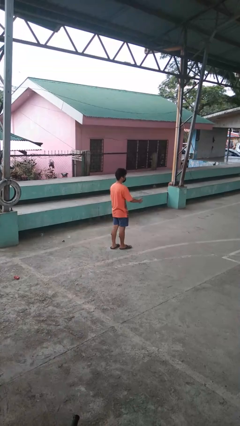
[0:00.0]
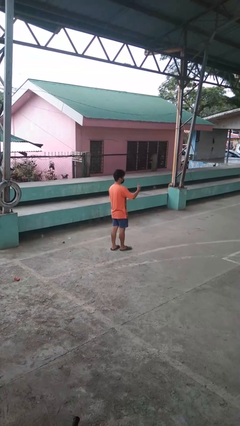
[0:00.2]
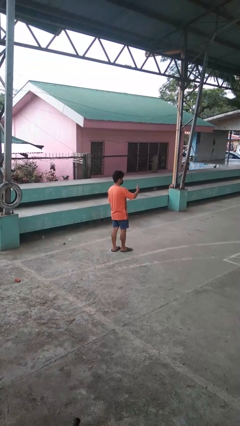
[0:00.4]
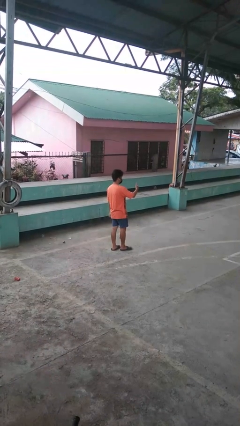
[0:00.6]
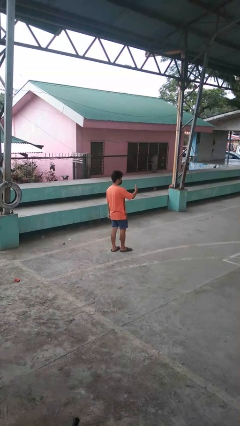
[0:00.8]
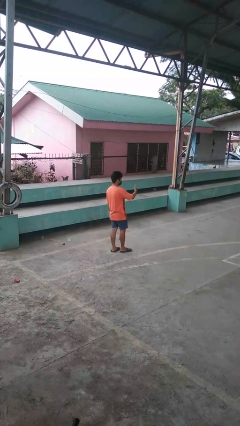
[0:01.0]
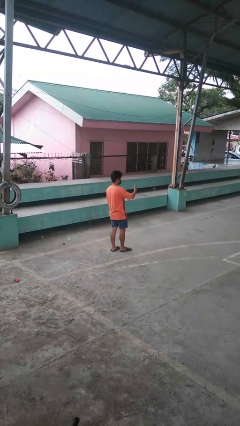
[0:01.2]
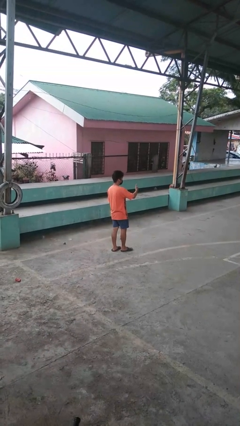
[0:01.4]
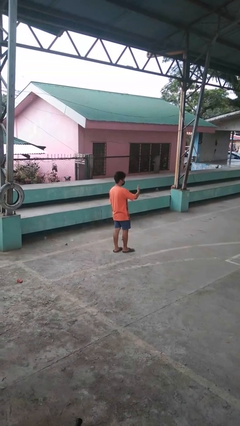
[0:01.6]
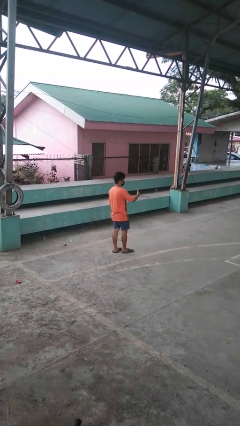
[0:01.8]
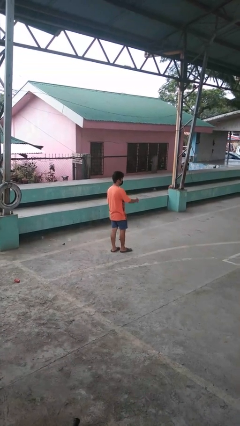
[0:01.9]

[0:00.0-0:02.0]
person gestures thumbs up

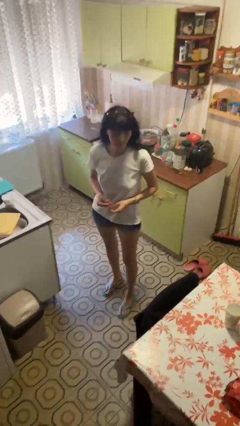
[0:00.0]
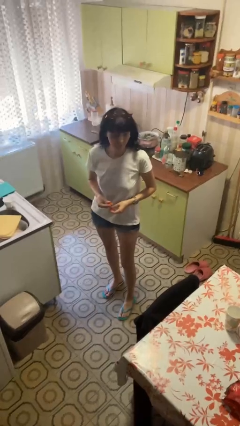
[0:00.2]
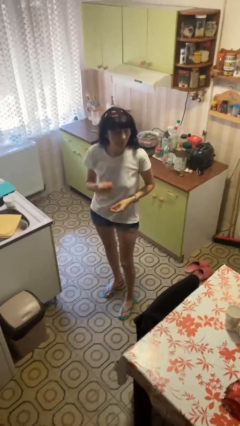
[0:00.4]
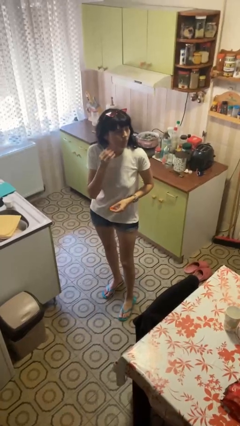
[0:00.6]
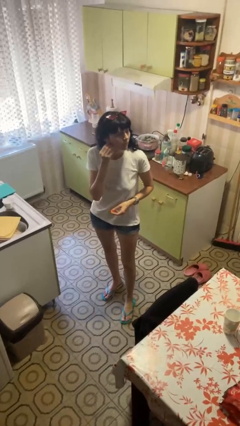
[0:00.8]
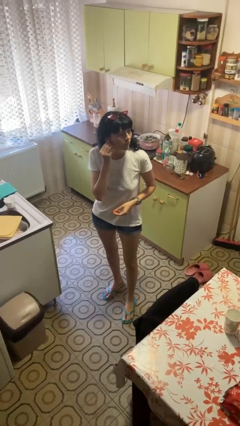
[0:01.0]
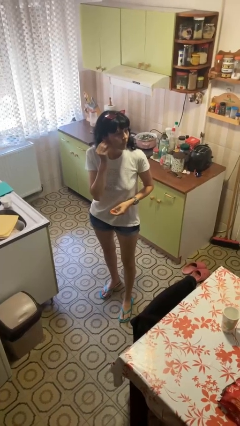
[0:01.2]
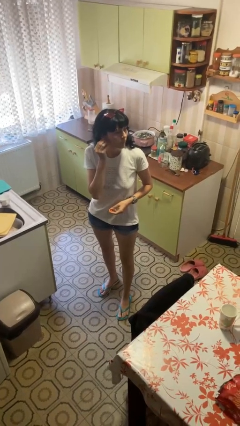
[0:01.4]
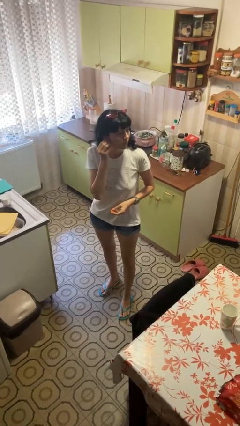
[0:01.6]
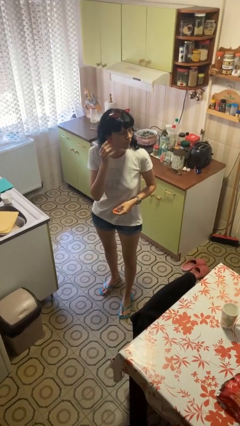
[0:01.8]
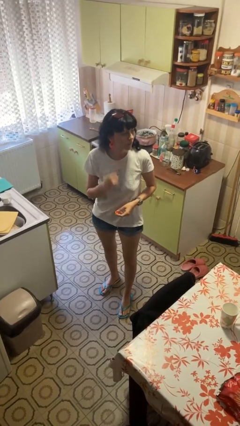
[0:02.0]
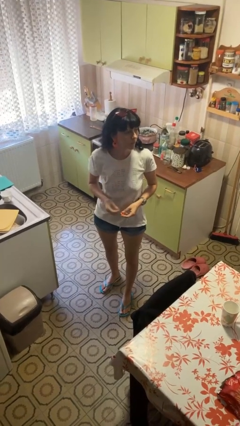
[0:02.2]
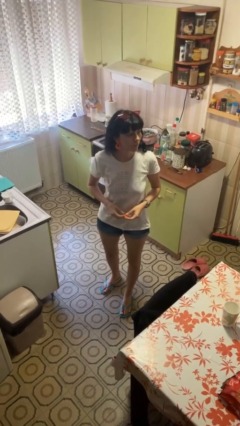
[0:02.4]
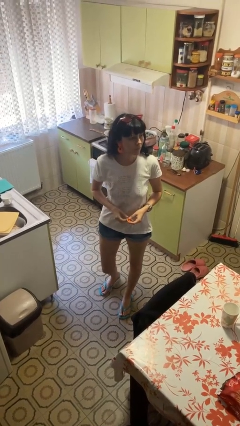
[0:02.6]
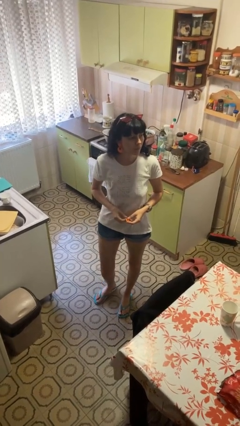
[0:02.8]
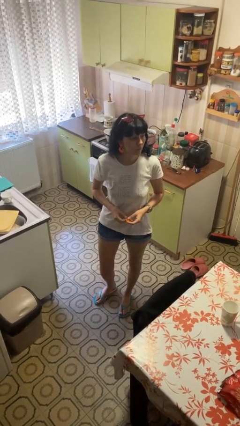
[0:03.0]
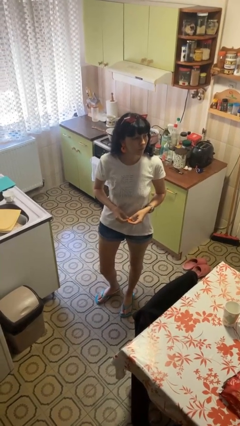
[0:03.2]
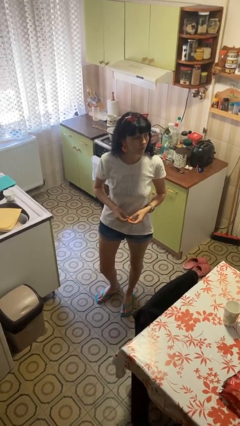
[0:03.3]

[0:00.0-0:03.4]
person puts on earrings

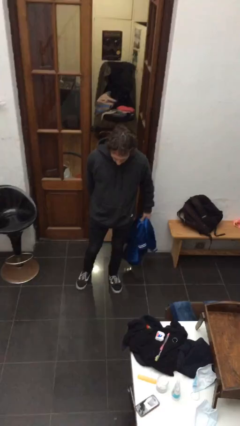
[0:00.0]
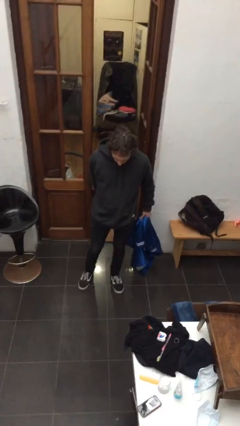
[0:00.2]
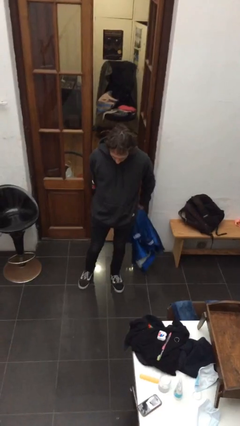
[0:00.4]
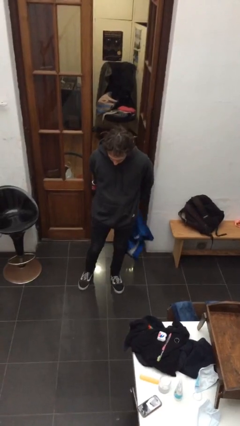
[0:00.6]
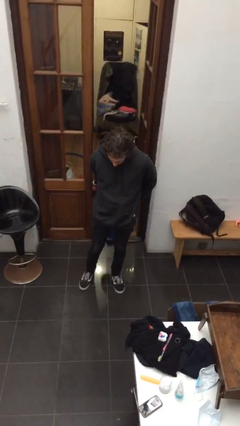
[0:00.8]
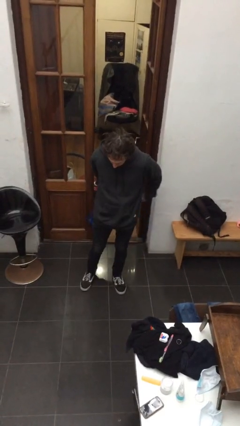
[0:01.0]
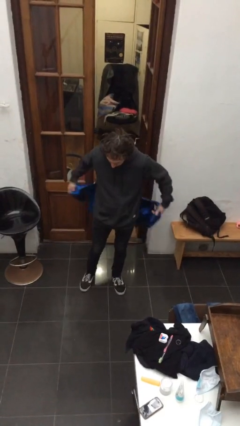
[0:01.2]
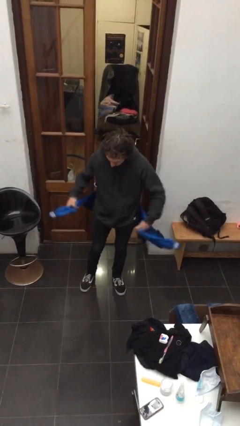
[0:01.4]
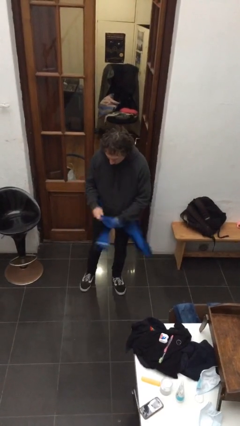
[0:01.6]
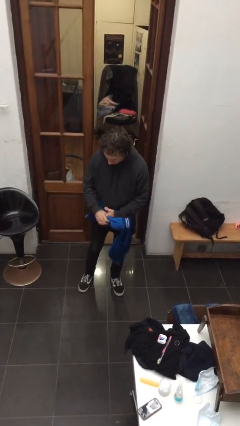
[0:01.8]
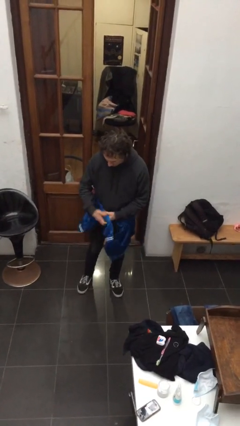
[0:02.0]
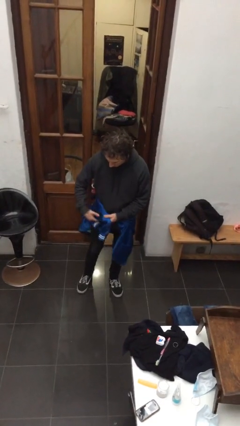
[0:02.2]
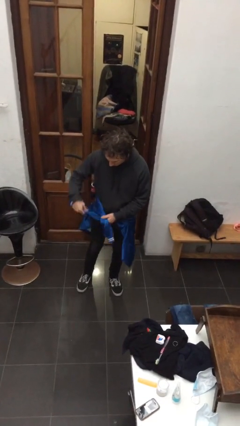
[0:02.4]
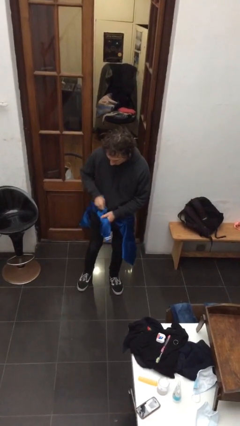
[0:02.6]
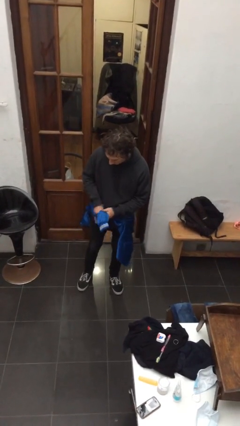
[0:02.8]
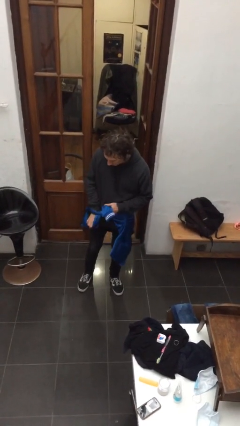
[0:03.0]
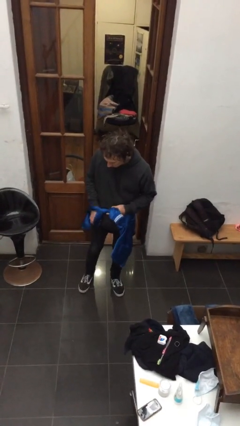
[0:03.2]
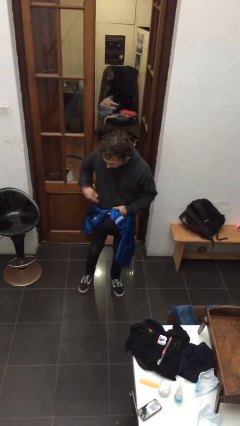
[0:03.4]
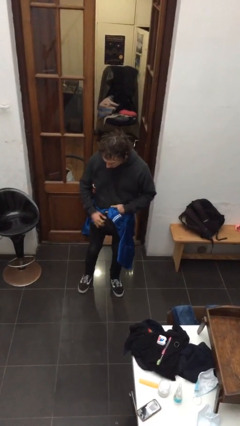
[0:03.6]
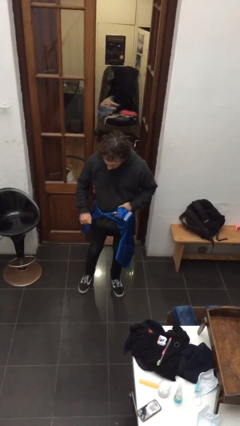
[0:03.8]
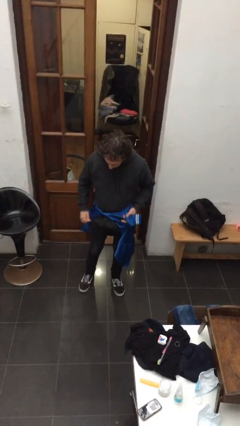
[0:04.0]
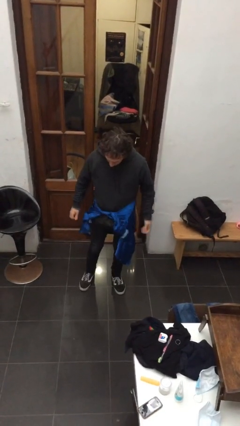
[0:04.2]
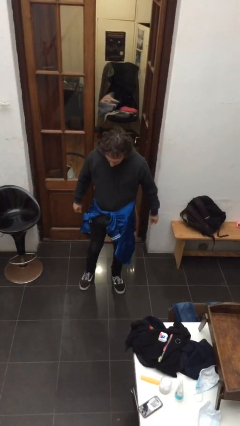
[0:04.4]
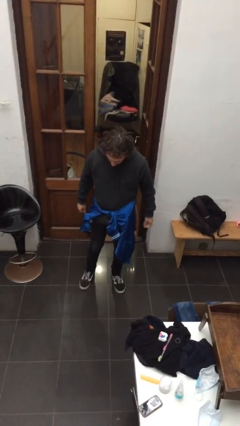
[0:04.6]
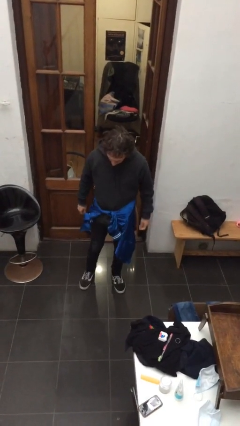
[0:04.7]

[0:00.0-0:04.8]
person ties jacket around waist

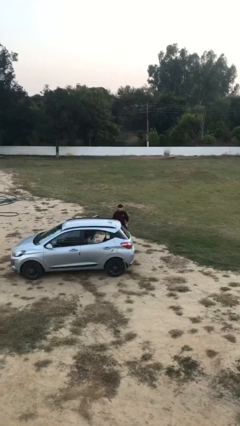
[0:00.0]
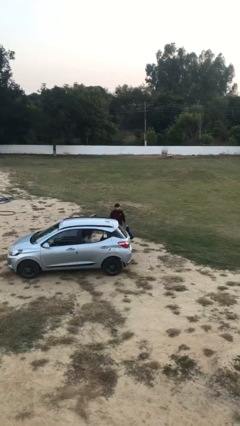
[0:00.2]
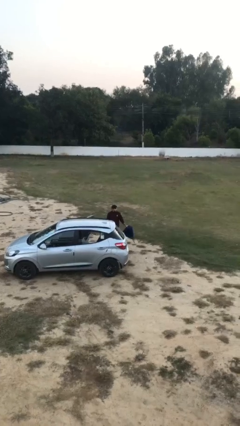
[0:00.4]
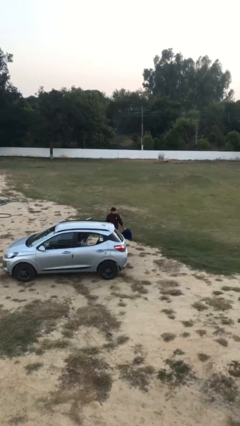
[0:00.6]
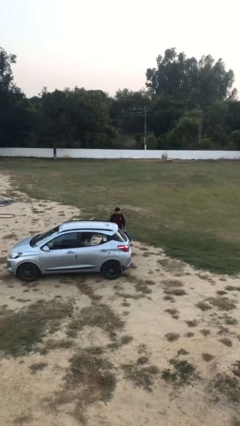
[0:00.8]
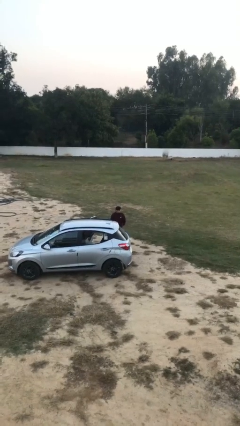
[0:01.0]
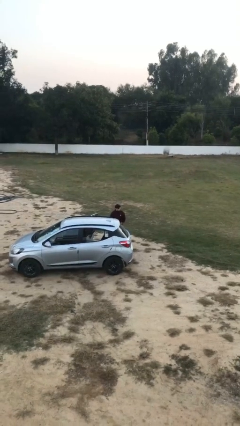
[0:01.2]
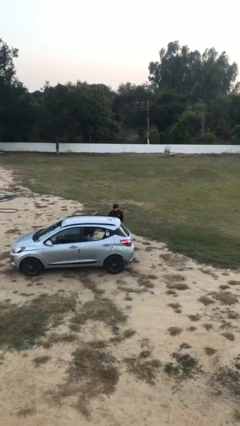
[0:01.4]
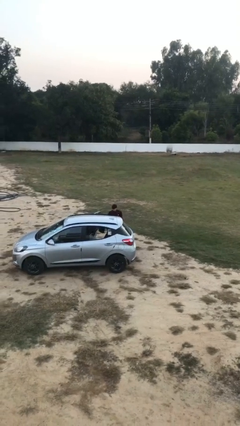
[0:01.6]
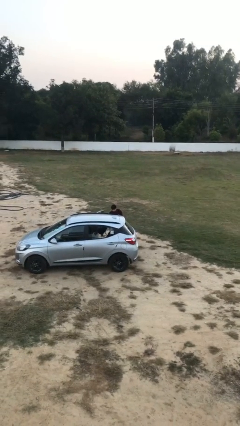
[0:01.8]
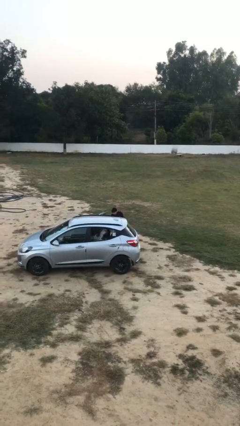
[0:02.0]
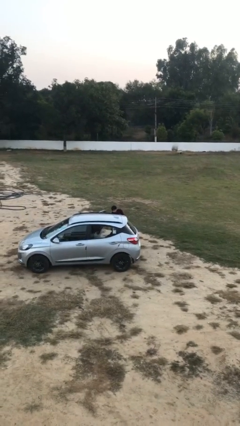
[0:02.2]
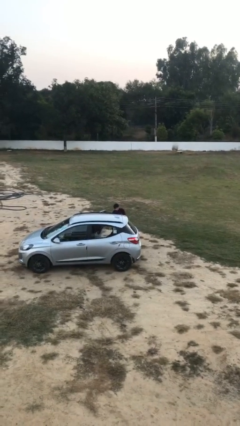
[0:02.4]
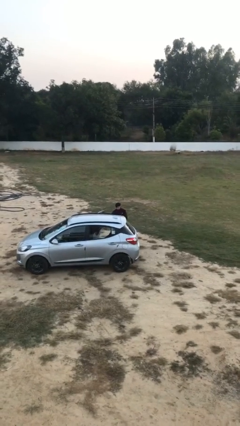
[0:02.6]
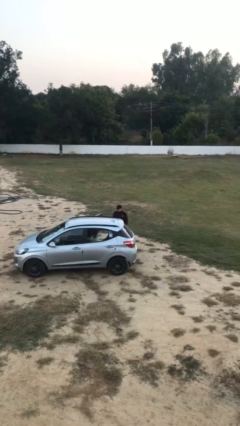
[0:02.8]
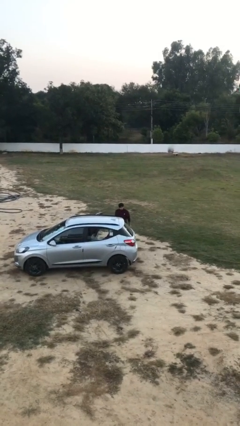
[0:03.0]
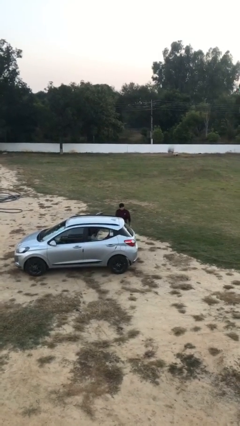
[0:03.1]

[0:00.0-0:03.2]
person loads car

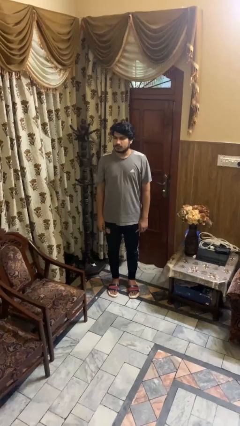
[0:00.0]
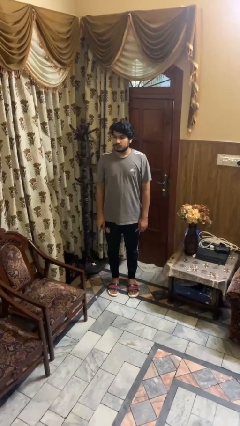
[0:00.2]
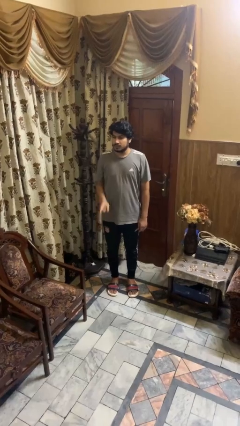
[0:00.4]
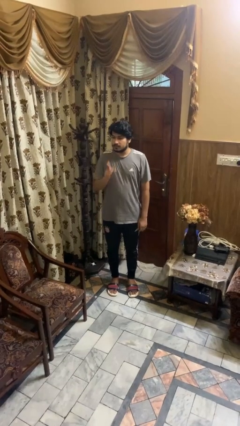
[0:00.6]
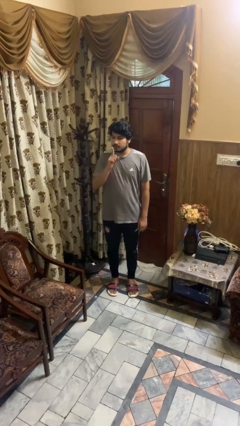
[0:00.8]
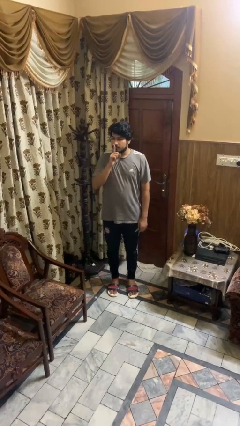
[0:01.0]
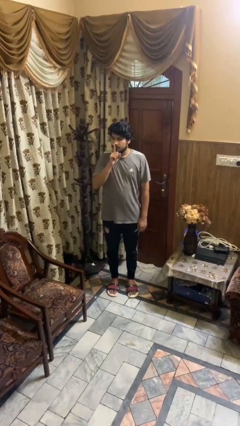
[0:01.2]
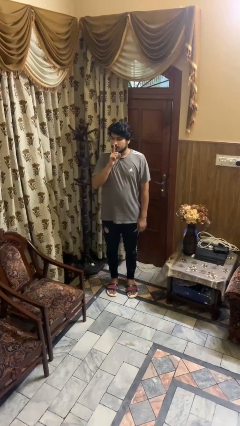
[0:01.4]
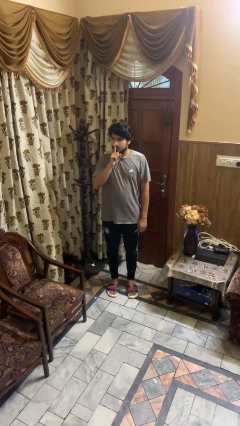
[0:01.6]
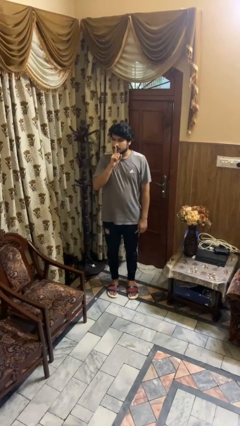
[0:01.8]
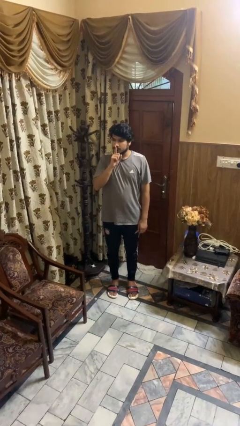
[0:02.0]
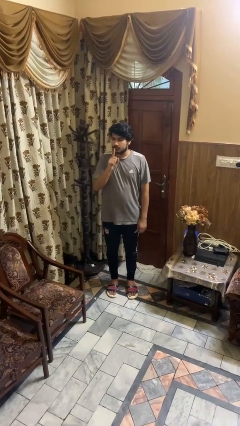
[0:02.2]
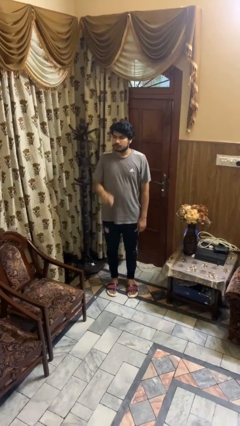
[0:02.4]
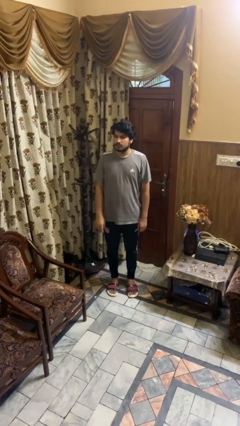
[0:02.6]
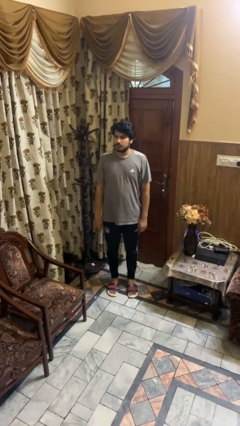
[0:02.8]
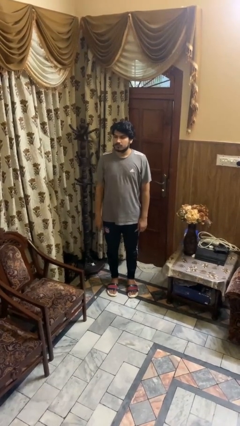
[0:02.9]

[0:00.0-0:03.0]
person gestures be quiet

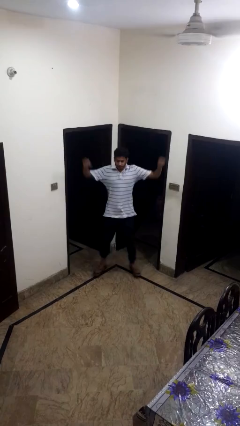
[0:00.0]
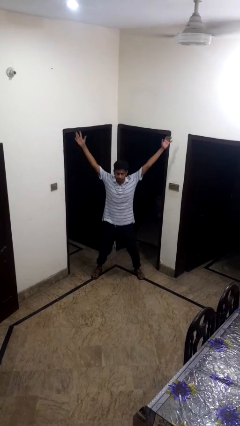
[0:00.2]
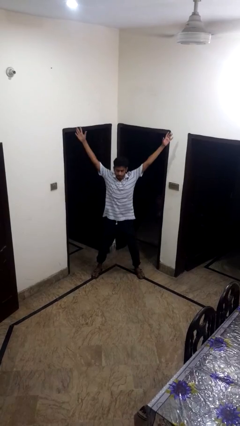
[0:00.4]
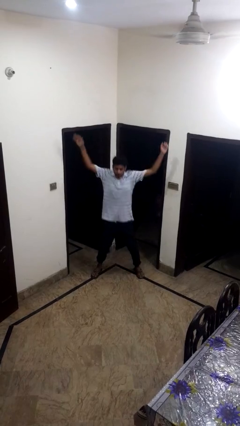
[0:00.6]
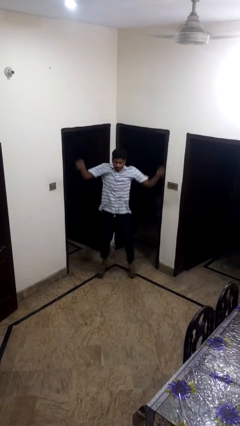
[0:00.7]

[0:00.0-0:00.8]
person exercises with jumping jacks
